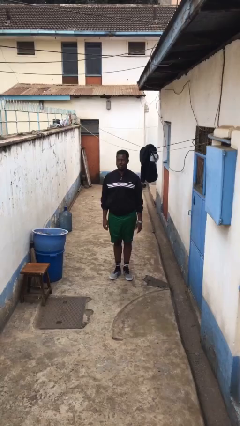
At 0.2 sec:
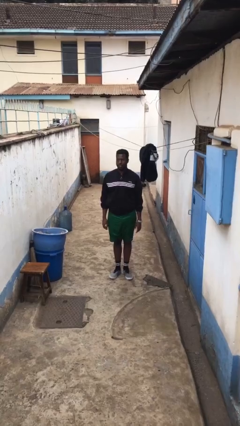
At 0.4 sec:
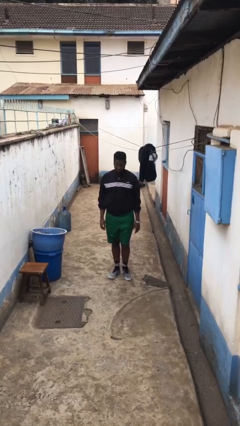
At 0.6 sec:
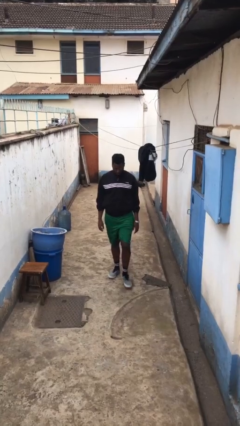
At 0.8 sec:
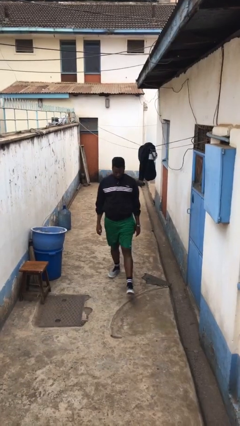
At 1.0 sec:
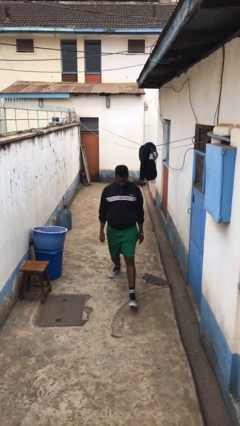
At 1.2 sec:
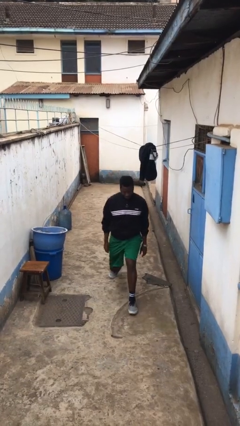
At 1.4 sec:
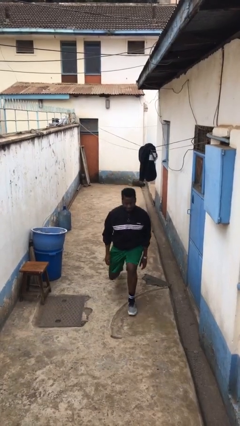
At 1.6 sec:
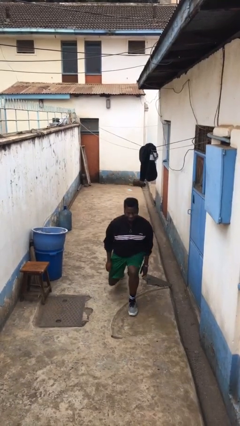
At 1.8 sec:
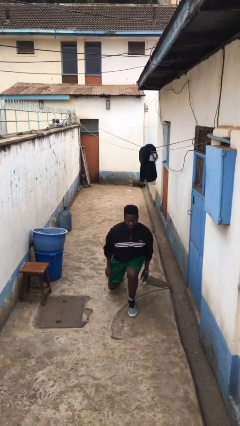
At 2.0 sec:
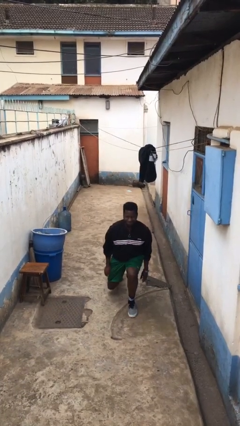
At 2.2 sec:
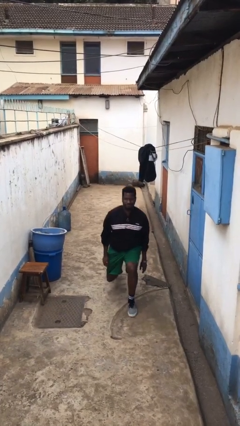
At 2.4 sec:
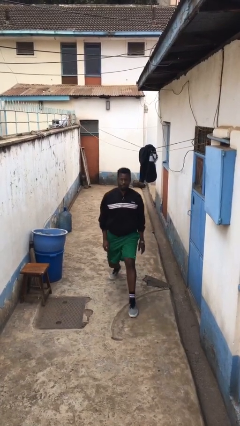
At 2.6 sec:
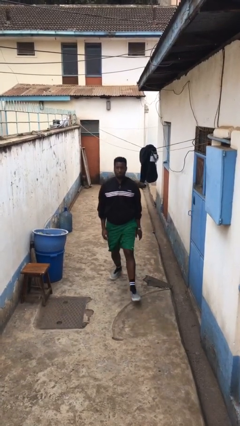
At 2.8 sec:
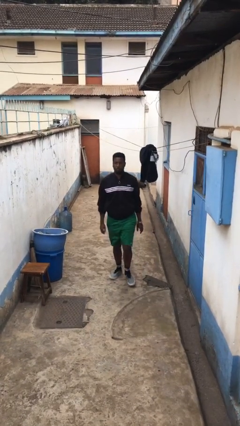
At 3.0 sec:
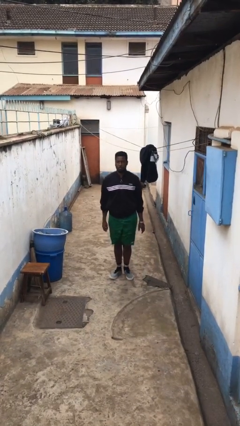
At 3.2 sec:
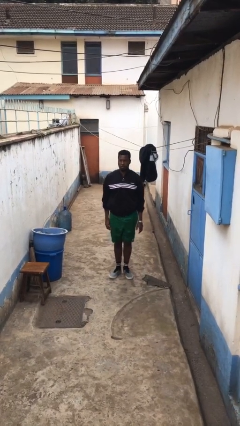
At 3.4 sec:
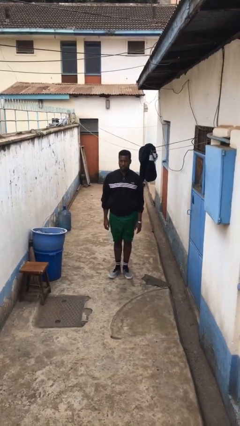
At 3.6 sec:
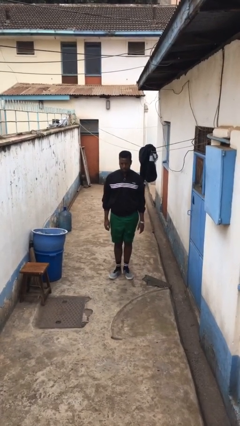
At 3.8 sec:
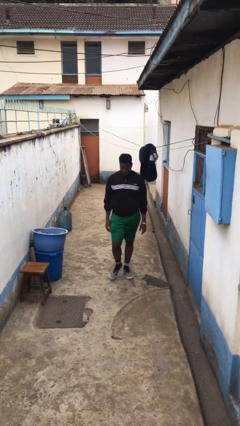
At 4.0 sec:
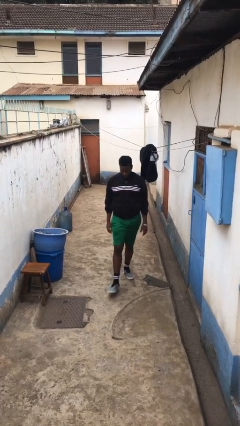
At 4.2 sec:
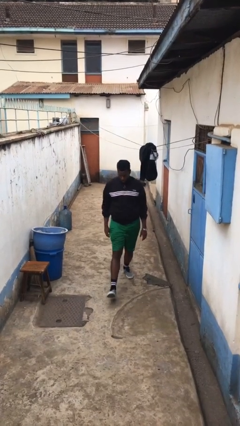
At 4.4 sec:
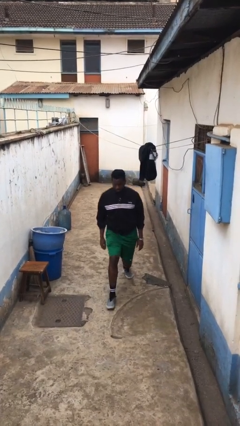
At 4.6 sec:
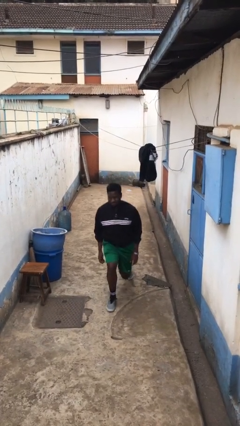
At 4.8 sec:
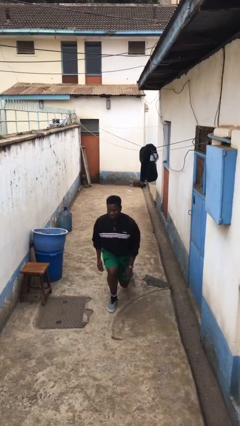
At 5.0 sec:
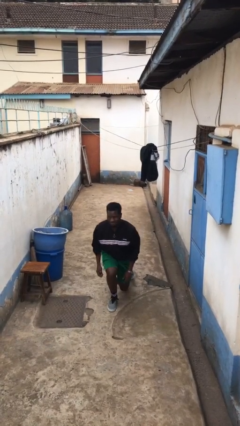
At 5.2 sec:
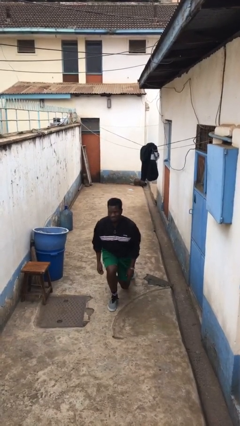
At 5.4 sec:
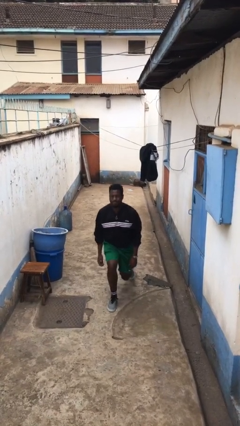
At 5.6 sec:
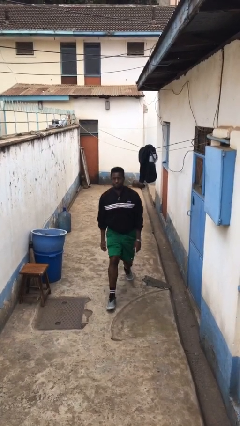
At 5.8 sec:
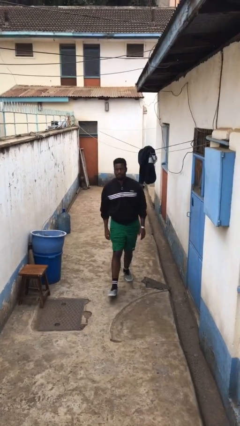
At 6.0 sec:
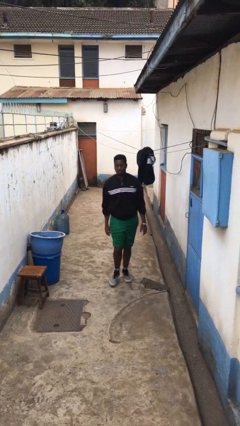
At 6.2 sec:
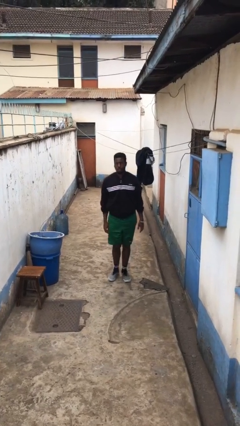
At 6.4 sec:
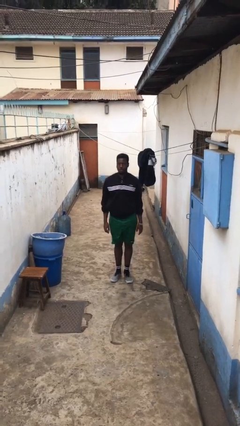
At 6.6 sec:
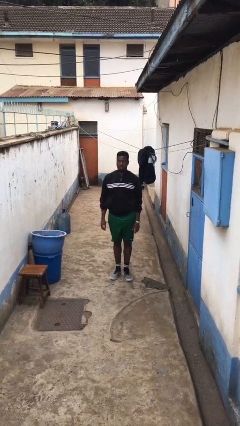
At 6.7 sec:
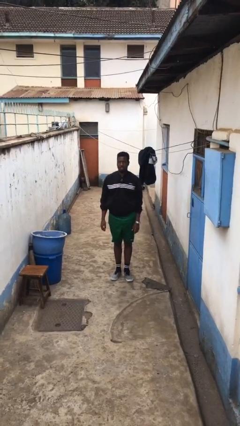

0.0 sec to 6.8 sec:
person exercises with lunges

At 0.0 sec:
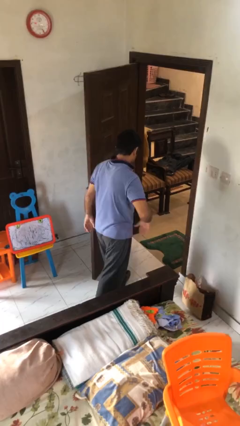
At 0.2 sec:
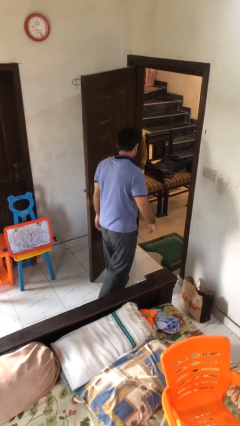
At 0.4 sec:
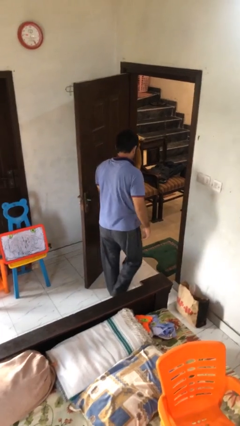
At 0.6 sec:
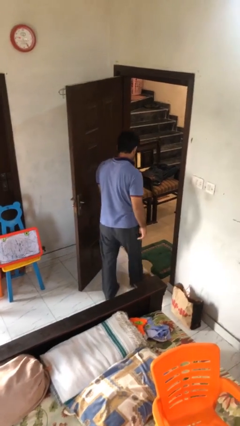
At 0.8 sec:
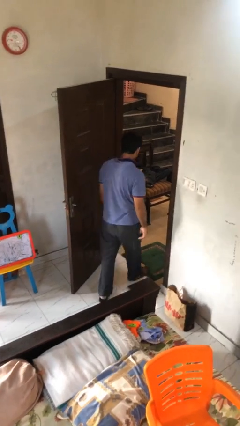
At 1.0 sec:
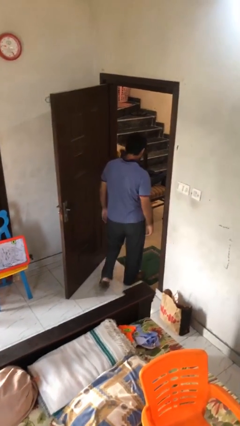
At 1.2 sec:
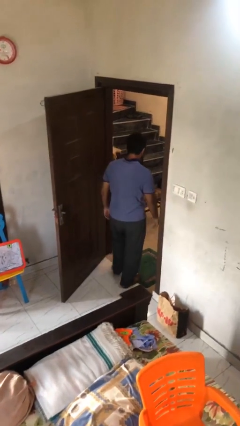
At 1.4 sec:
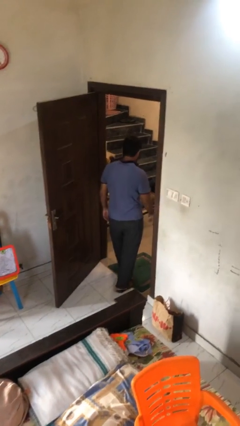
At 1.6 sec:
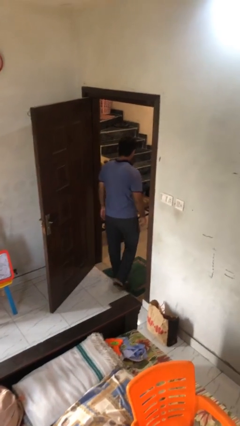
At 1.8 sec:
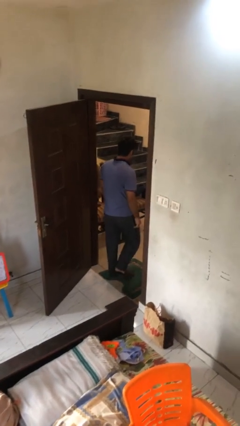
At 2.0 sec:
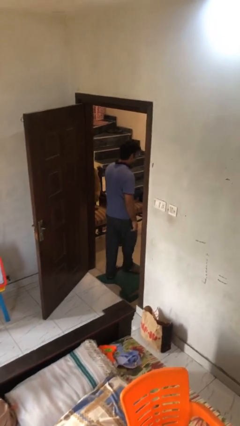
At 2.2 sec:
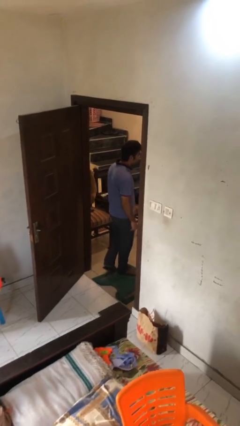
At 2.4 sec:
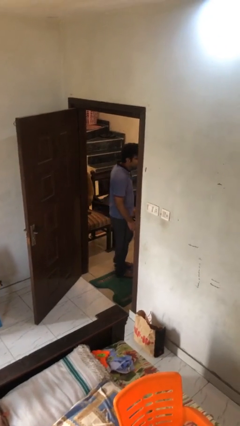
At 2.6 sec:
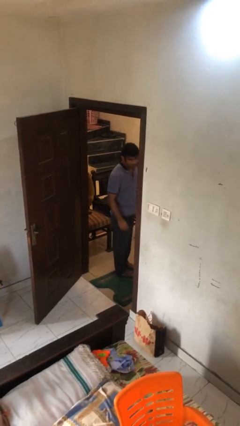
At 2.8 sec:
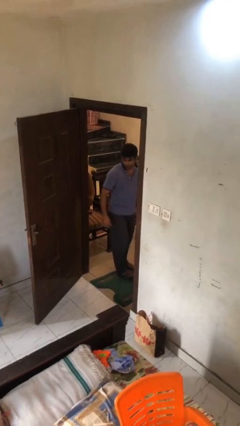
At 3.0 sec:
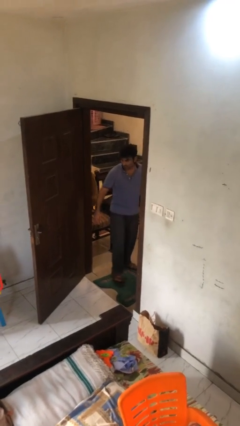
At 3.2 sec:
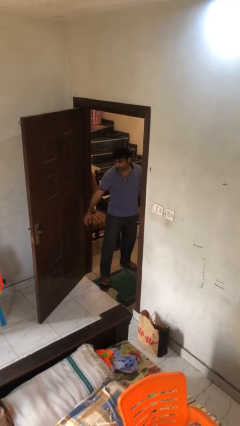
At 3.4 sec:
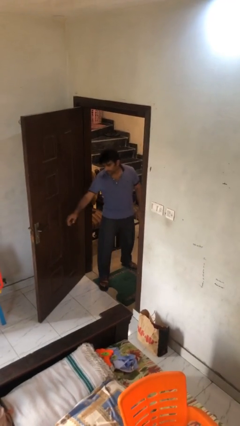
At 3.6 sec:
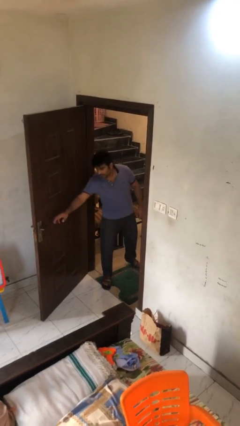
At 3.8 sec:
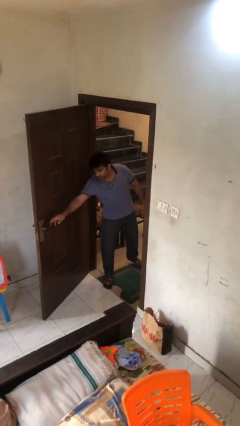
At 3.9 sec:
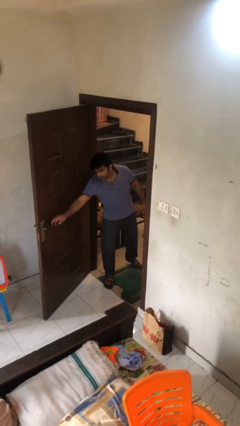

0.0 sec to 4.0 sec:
person exits scene through structure

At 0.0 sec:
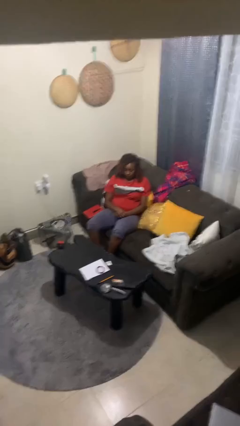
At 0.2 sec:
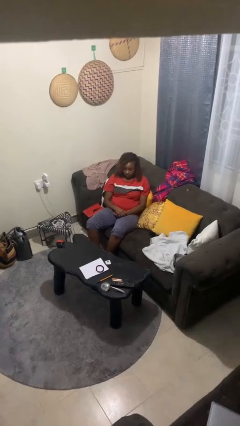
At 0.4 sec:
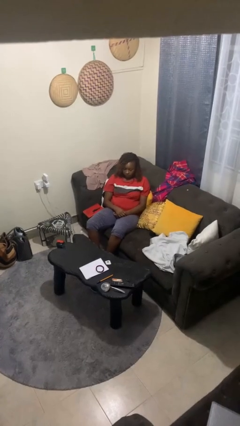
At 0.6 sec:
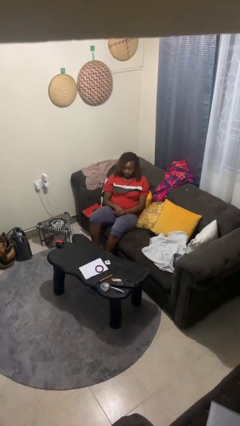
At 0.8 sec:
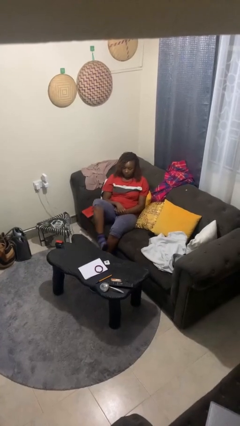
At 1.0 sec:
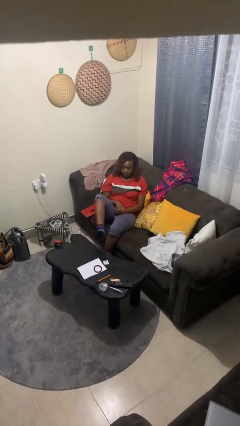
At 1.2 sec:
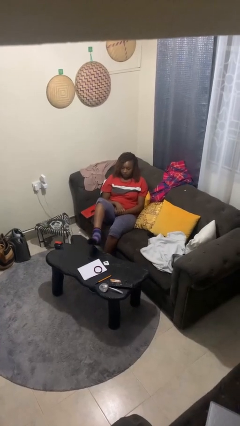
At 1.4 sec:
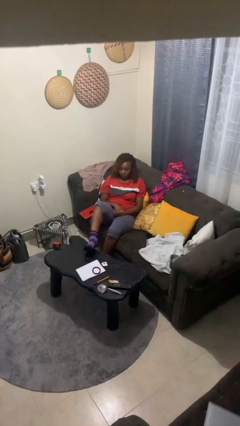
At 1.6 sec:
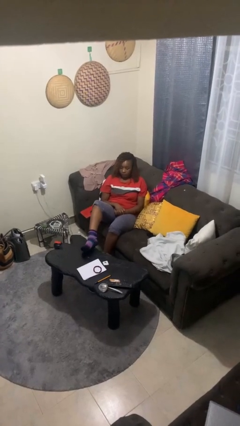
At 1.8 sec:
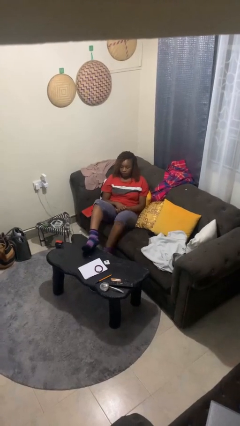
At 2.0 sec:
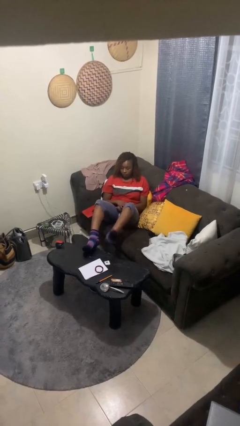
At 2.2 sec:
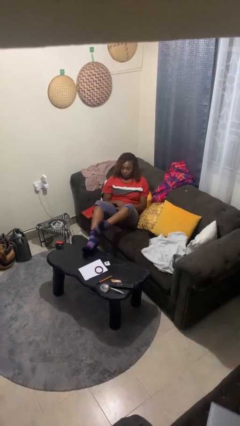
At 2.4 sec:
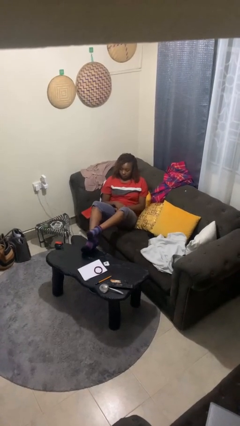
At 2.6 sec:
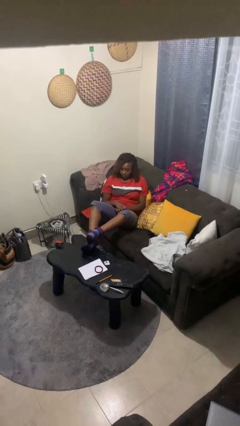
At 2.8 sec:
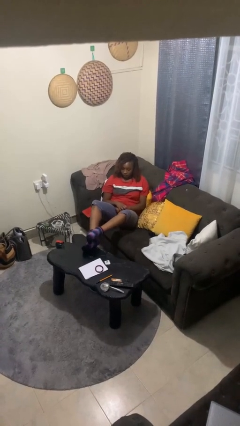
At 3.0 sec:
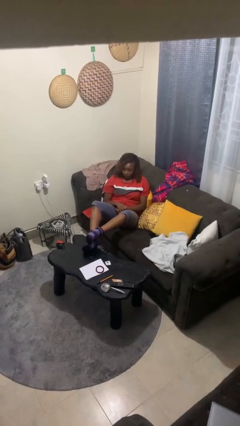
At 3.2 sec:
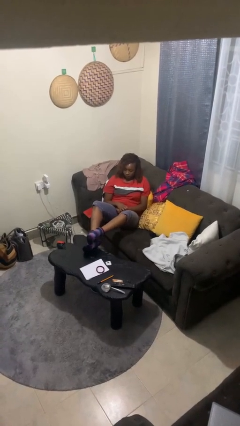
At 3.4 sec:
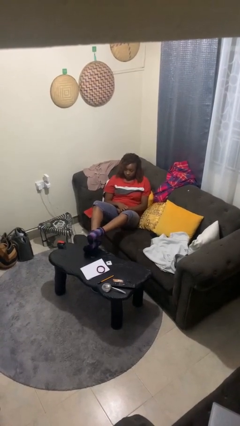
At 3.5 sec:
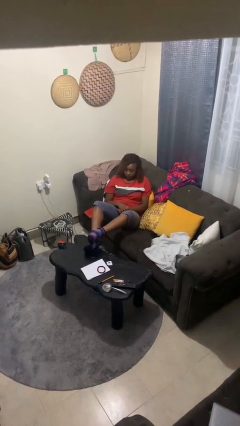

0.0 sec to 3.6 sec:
person puts feet up

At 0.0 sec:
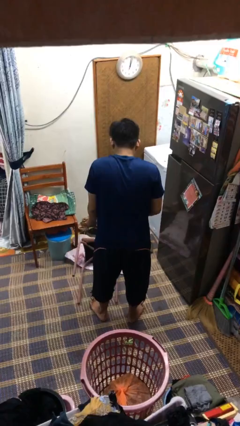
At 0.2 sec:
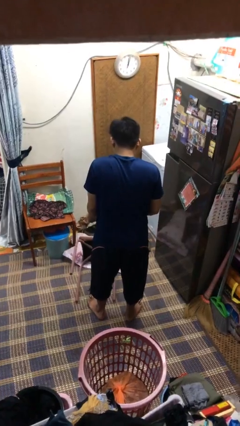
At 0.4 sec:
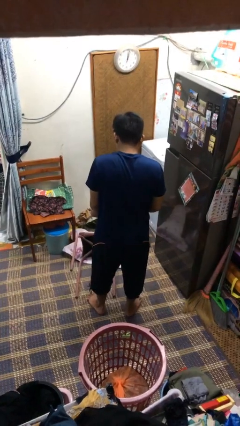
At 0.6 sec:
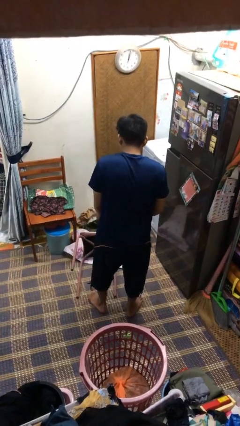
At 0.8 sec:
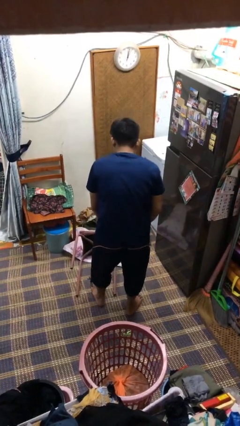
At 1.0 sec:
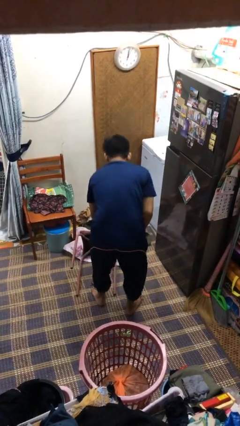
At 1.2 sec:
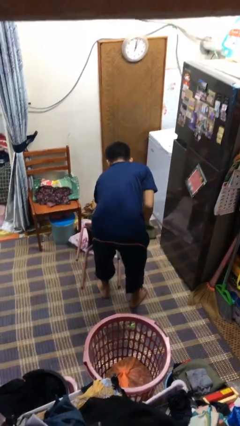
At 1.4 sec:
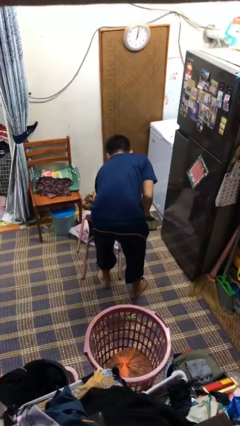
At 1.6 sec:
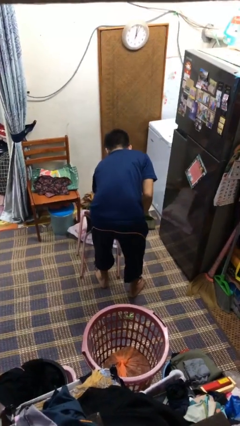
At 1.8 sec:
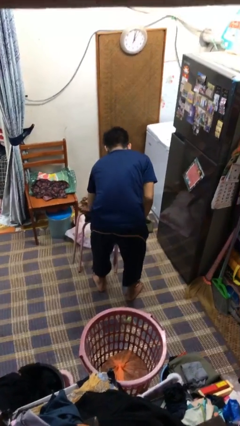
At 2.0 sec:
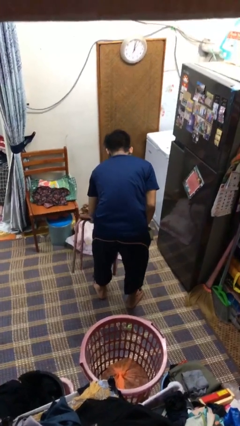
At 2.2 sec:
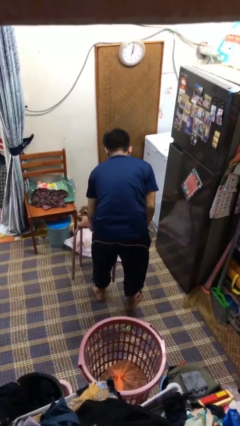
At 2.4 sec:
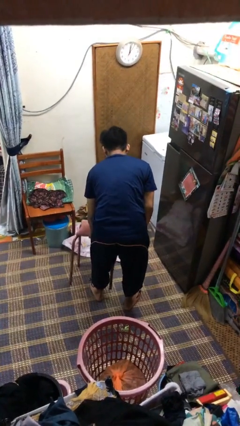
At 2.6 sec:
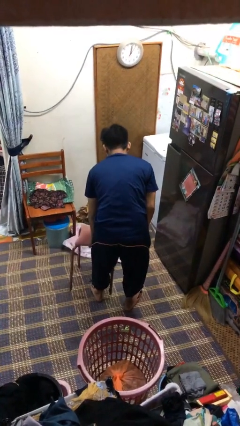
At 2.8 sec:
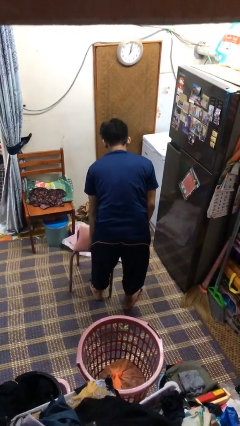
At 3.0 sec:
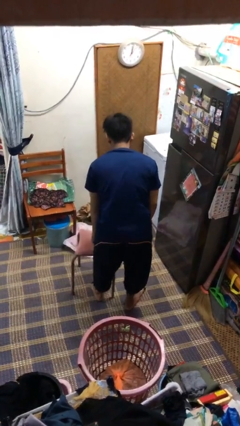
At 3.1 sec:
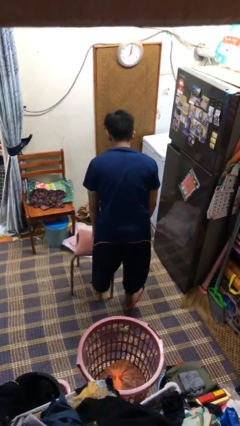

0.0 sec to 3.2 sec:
person sets upright furniture
